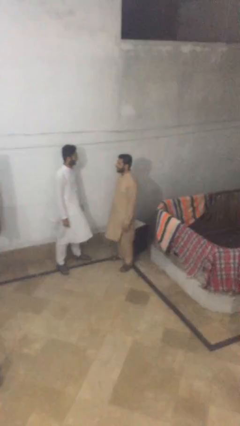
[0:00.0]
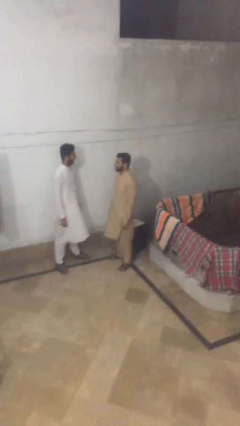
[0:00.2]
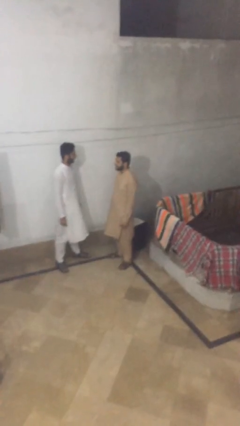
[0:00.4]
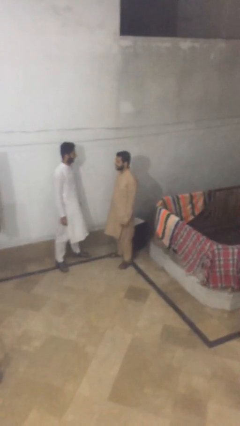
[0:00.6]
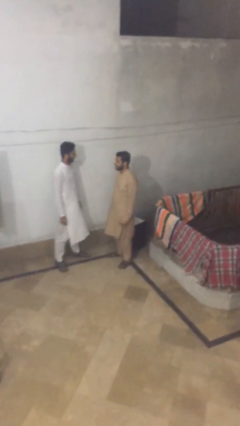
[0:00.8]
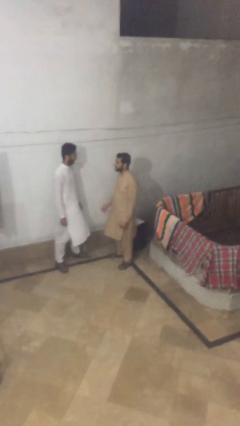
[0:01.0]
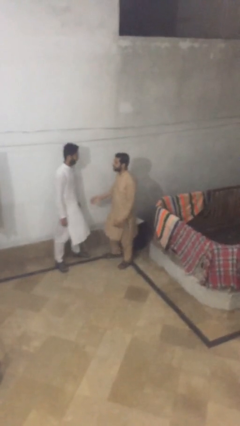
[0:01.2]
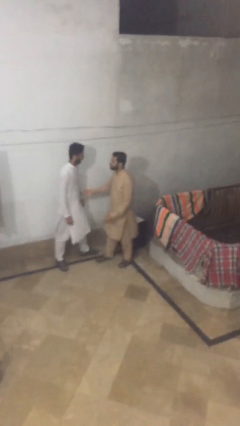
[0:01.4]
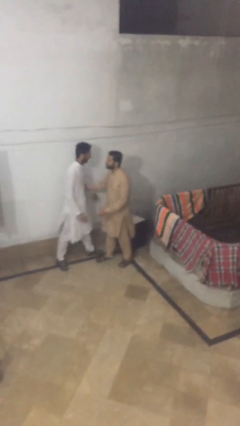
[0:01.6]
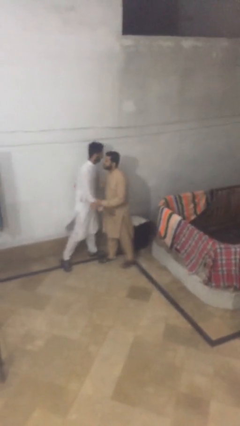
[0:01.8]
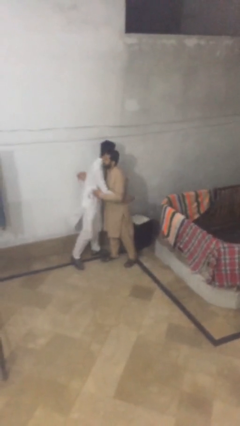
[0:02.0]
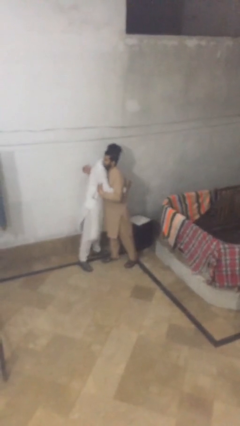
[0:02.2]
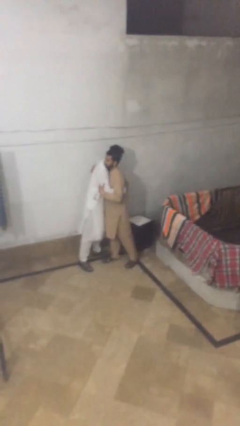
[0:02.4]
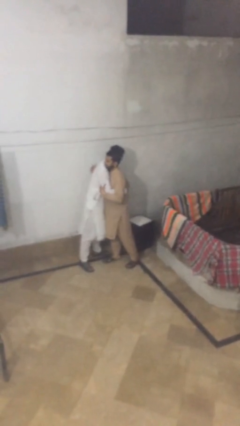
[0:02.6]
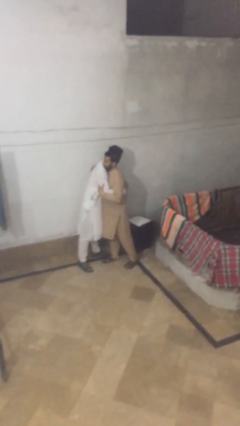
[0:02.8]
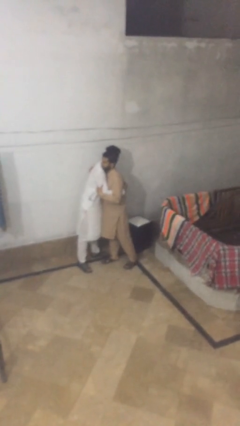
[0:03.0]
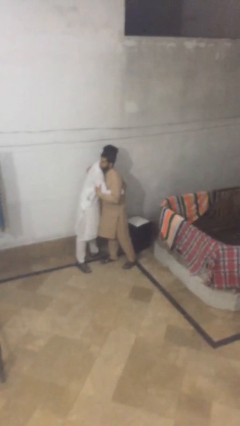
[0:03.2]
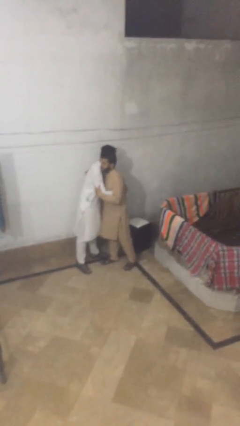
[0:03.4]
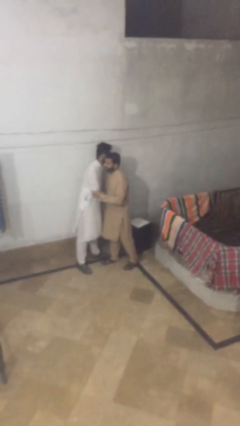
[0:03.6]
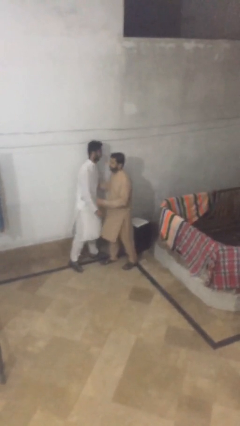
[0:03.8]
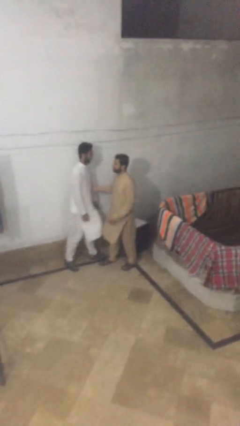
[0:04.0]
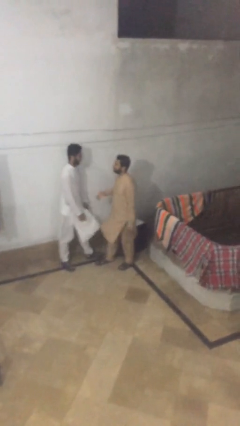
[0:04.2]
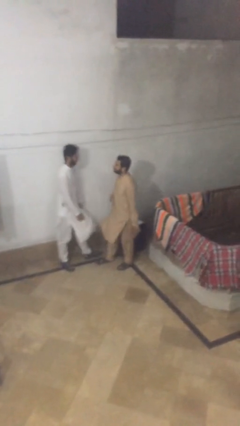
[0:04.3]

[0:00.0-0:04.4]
person embraces person

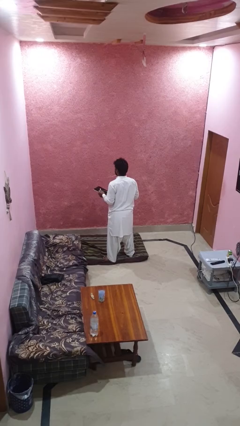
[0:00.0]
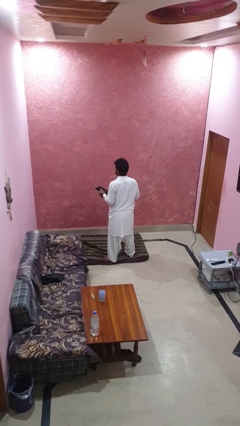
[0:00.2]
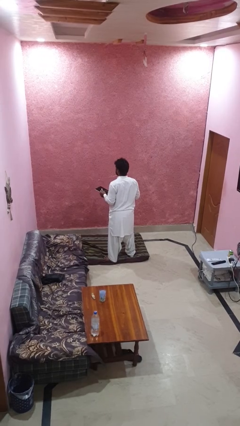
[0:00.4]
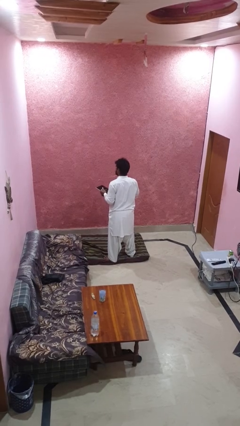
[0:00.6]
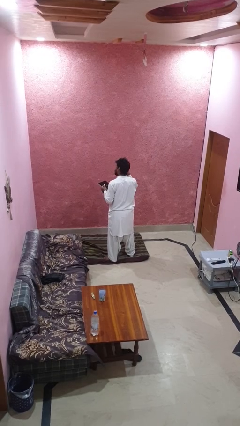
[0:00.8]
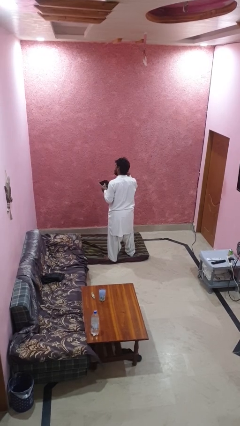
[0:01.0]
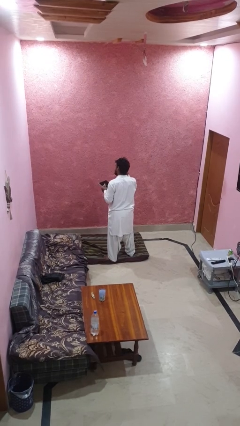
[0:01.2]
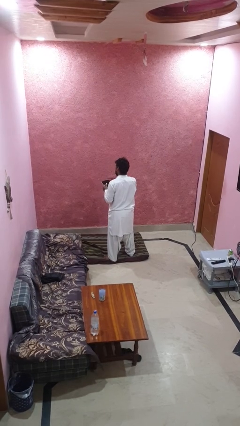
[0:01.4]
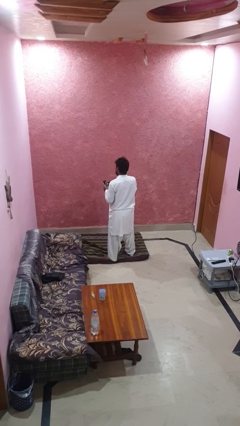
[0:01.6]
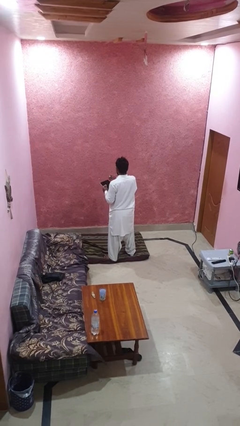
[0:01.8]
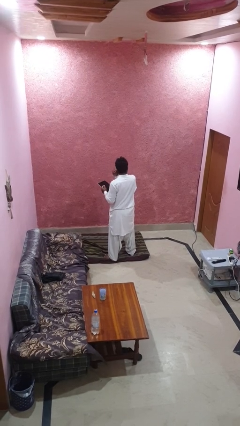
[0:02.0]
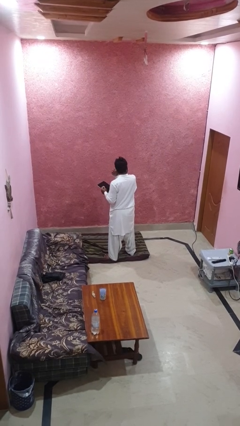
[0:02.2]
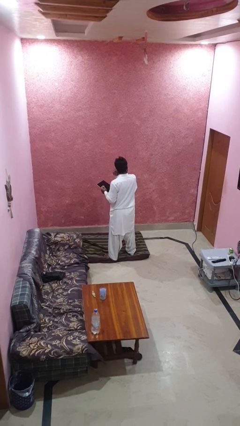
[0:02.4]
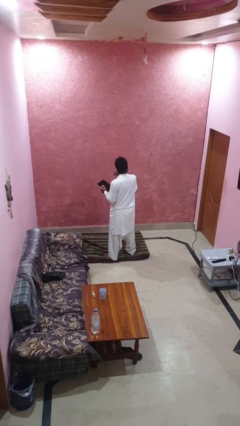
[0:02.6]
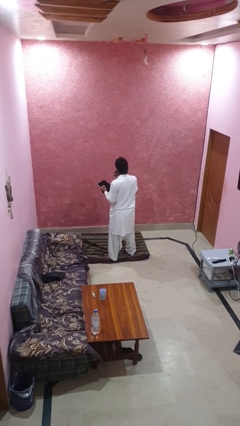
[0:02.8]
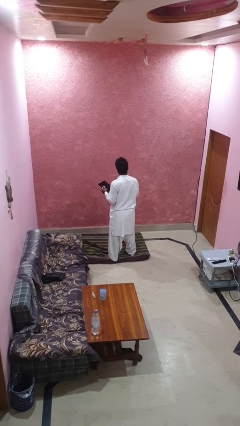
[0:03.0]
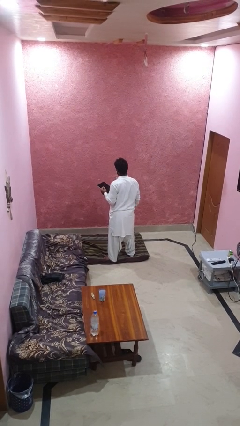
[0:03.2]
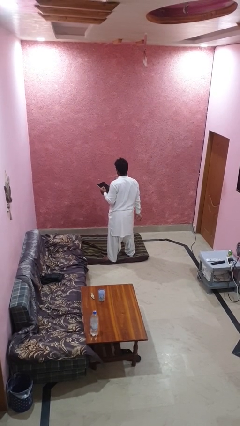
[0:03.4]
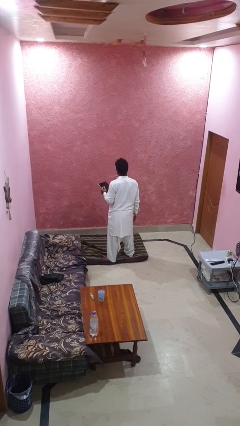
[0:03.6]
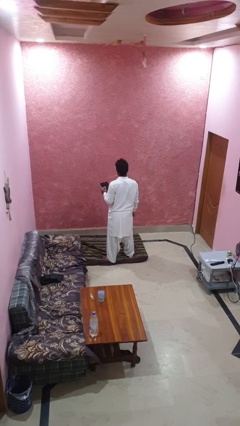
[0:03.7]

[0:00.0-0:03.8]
person puts on headphones

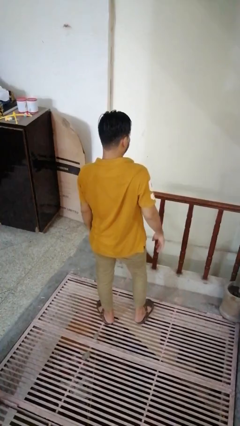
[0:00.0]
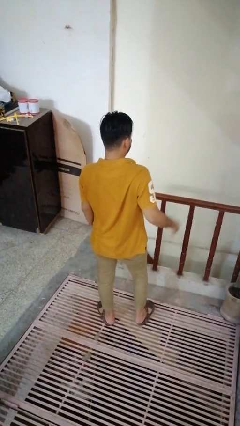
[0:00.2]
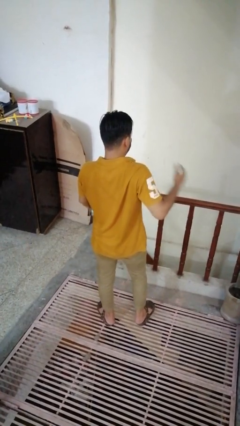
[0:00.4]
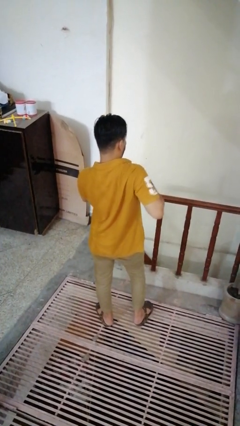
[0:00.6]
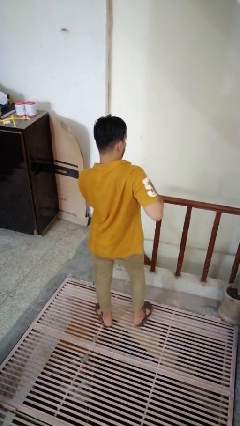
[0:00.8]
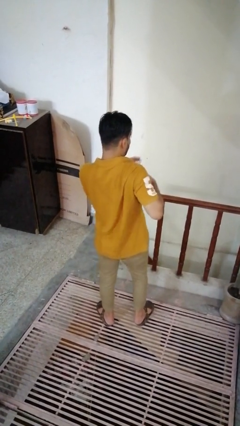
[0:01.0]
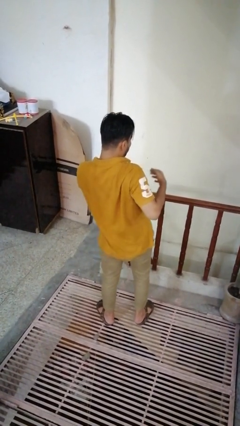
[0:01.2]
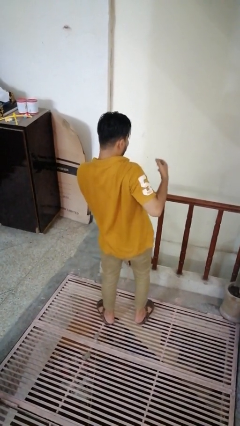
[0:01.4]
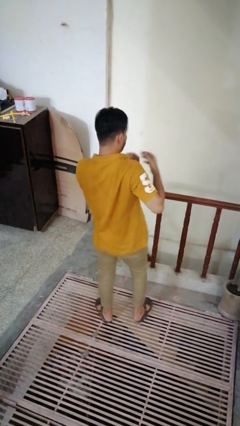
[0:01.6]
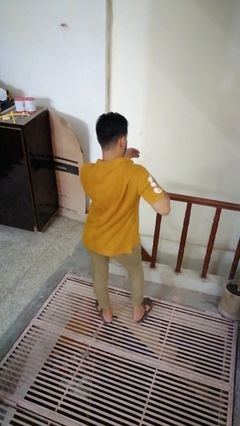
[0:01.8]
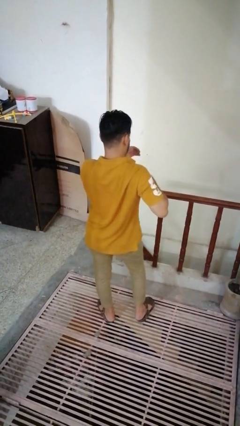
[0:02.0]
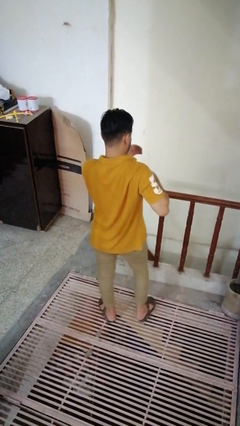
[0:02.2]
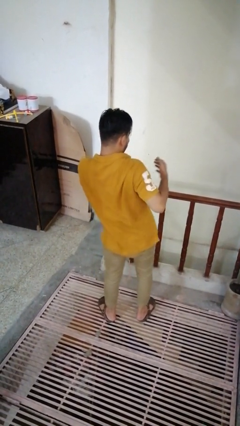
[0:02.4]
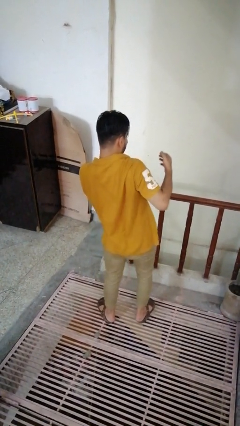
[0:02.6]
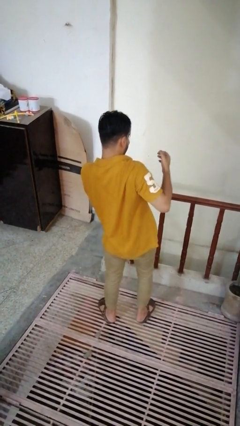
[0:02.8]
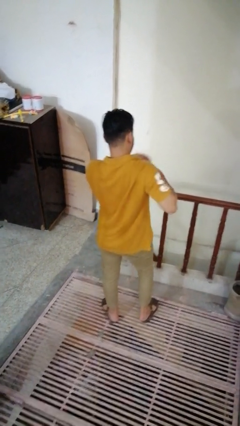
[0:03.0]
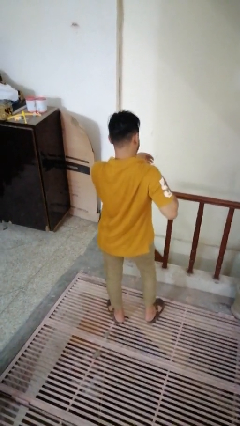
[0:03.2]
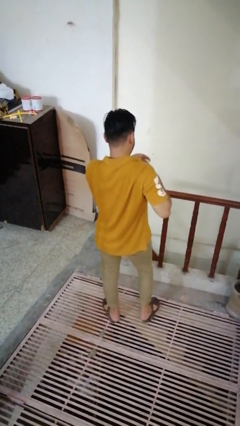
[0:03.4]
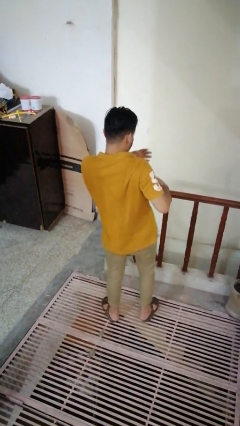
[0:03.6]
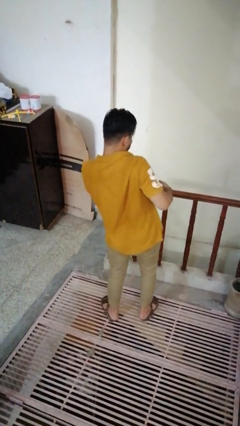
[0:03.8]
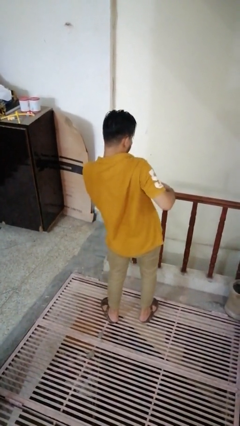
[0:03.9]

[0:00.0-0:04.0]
person drums on chest

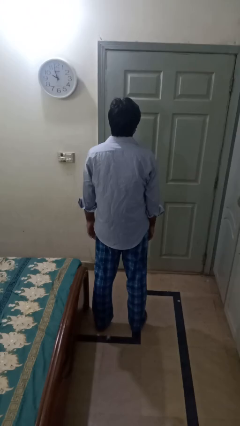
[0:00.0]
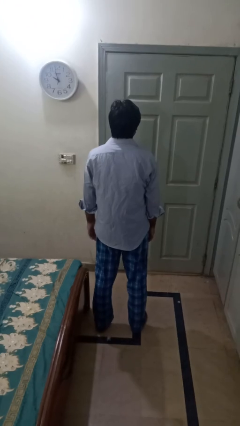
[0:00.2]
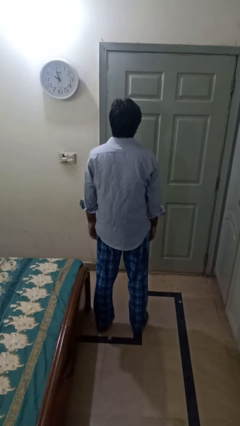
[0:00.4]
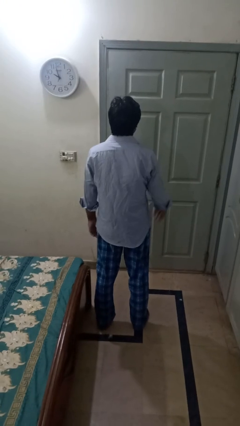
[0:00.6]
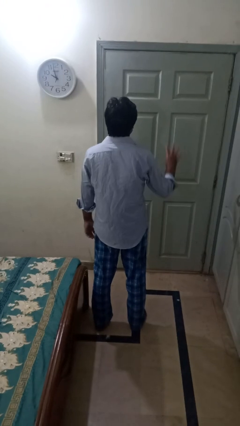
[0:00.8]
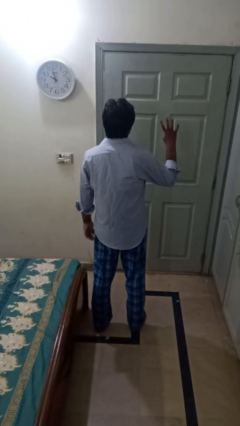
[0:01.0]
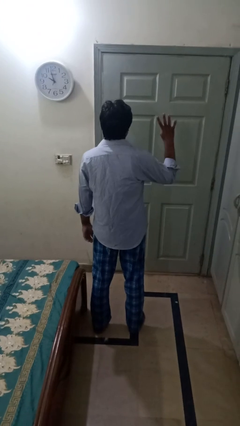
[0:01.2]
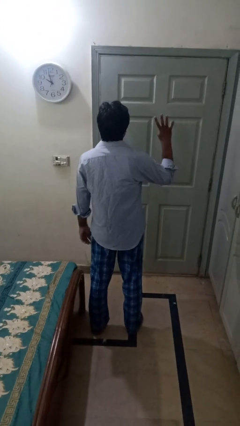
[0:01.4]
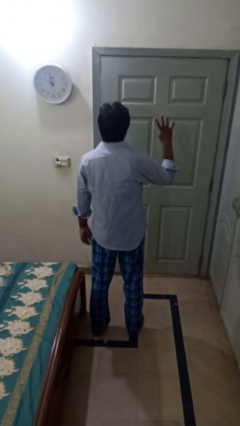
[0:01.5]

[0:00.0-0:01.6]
person gestures number four

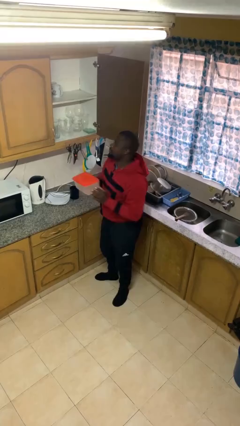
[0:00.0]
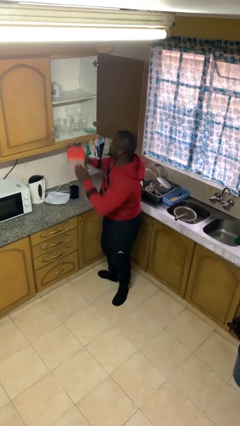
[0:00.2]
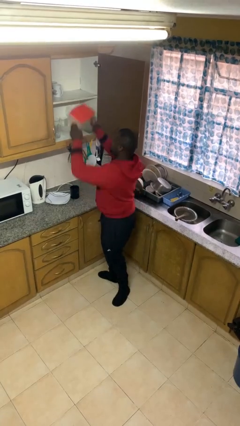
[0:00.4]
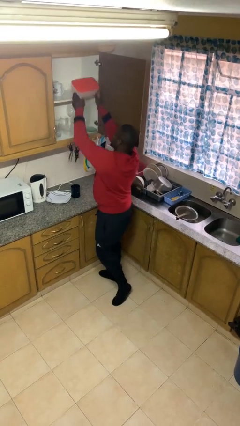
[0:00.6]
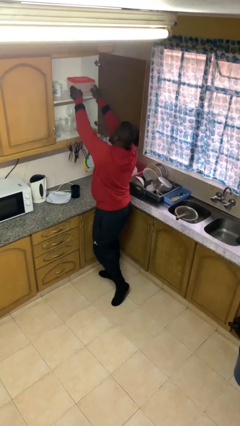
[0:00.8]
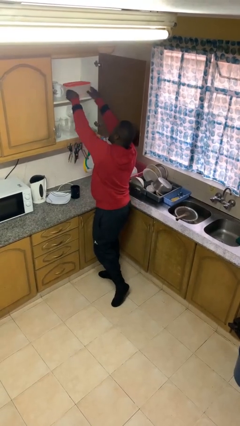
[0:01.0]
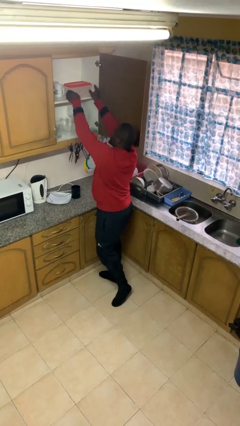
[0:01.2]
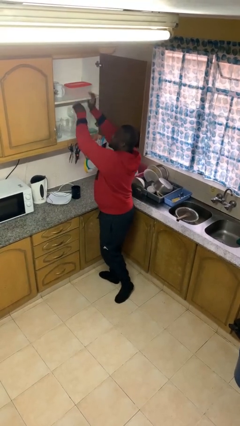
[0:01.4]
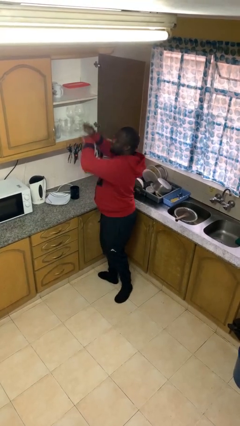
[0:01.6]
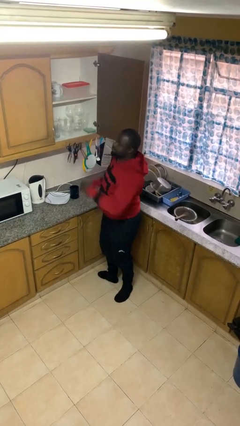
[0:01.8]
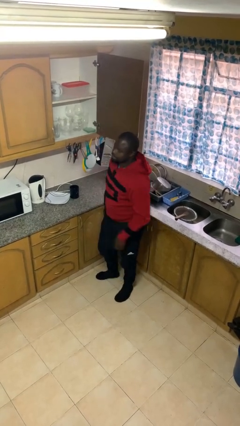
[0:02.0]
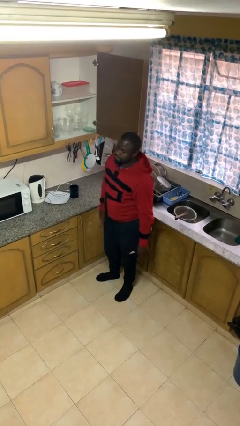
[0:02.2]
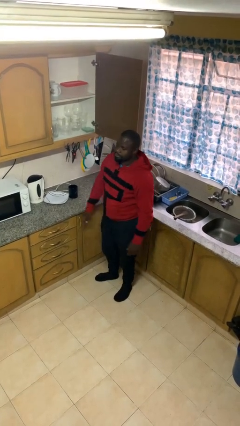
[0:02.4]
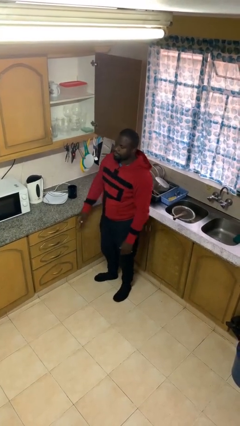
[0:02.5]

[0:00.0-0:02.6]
person puts down object into cabinet

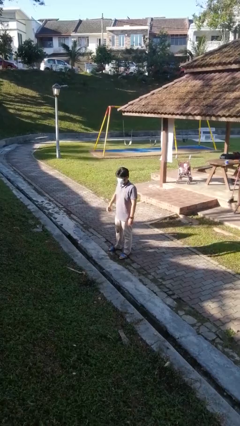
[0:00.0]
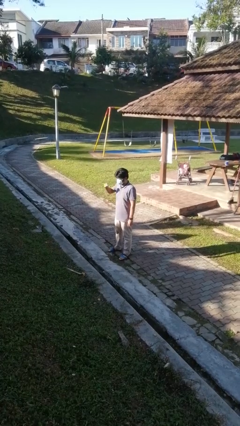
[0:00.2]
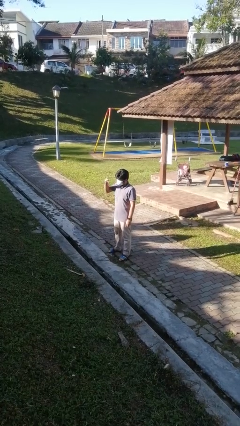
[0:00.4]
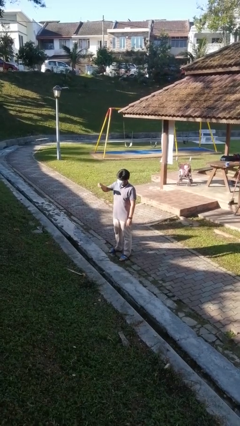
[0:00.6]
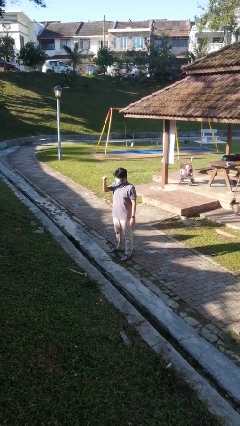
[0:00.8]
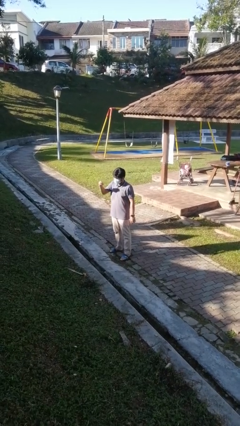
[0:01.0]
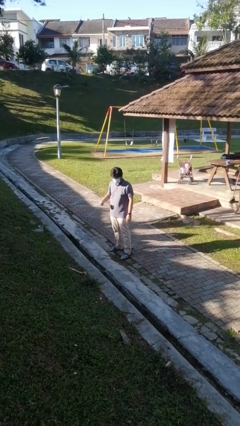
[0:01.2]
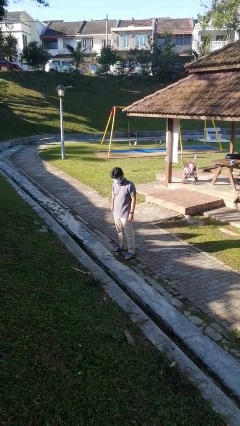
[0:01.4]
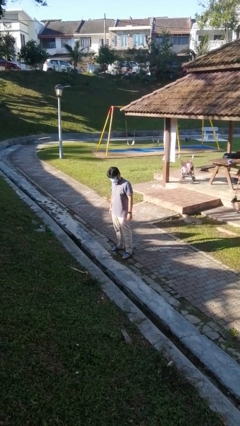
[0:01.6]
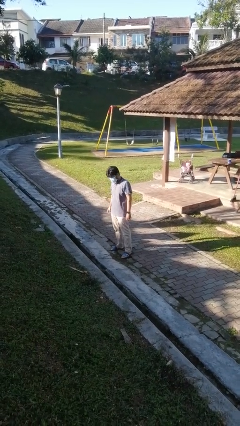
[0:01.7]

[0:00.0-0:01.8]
person snaps fingers
